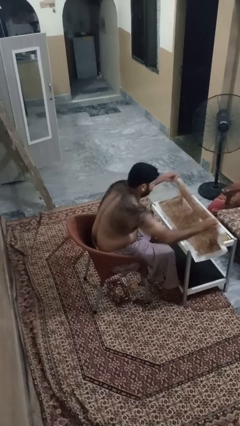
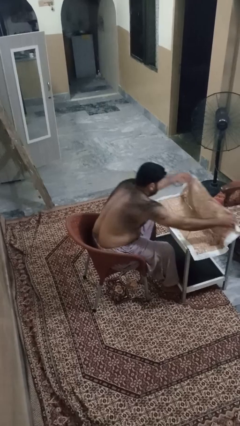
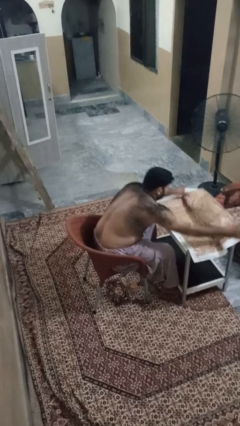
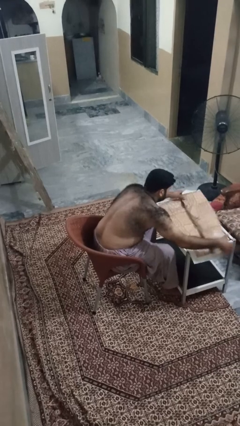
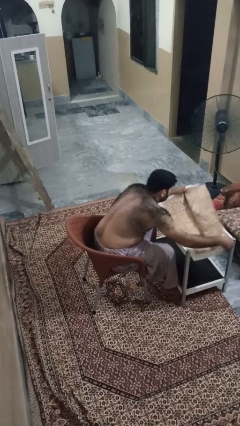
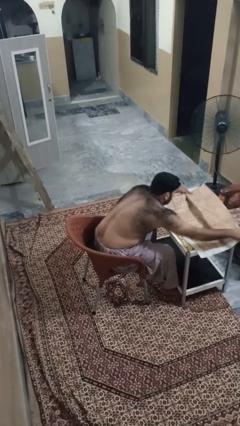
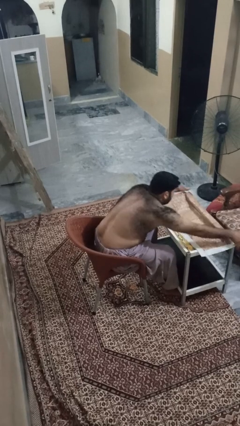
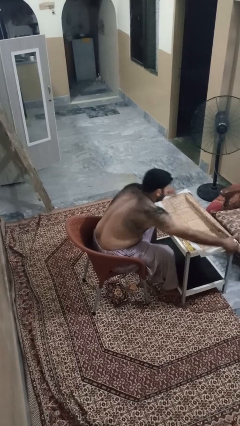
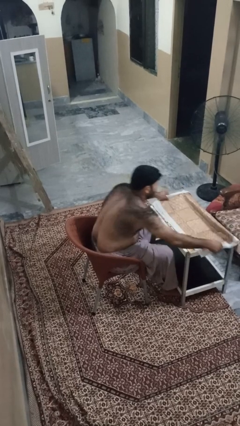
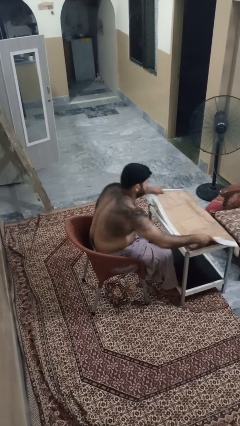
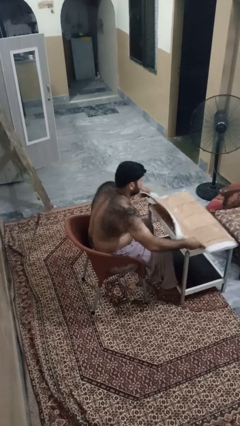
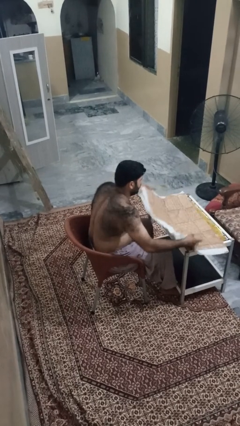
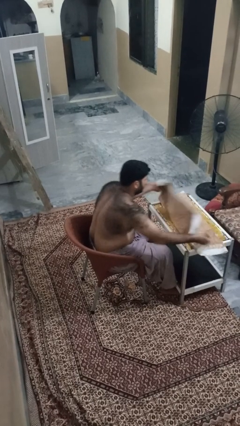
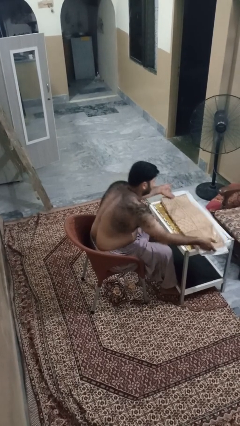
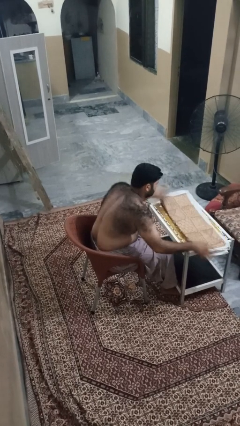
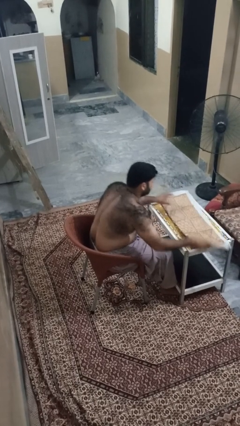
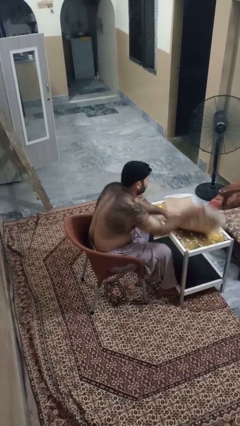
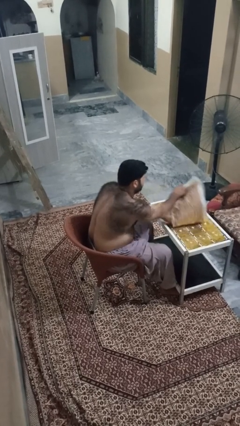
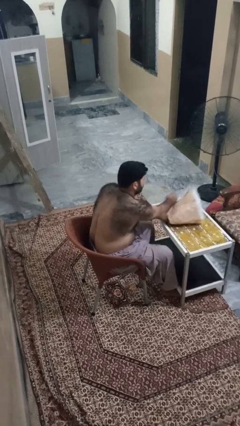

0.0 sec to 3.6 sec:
person folds tablecloth

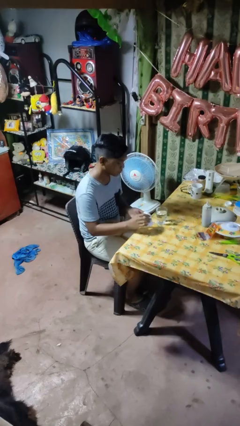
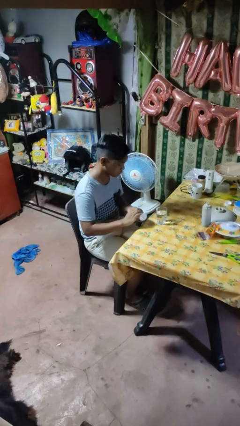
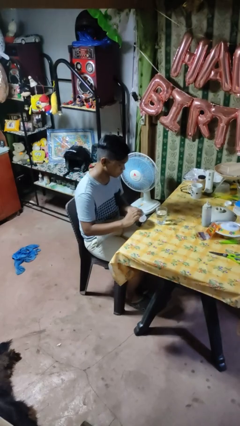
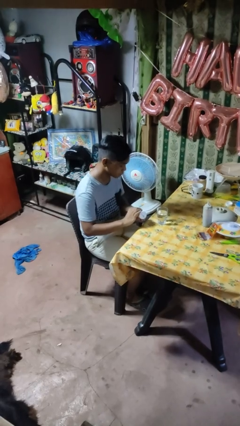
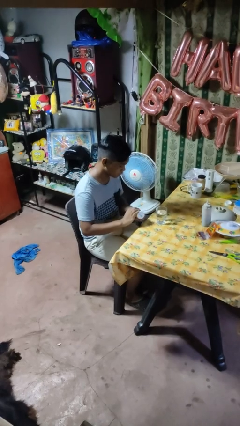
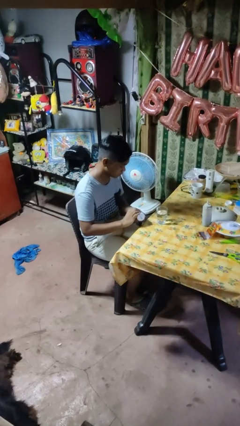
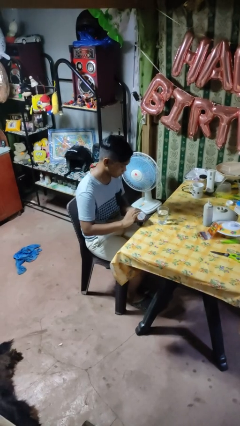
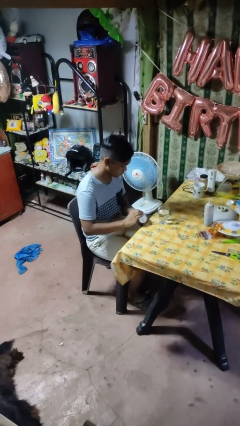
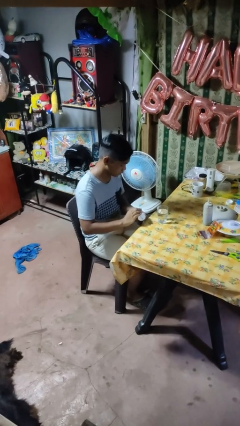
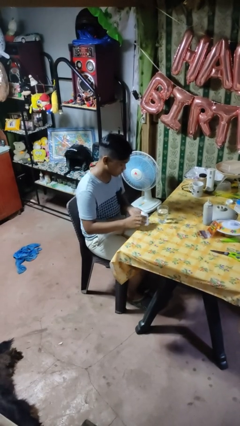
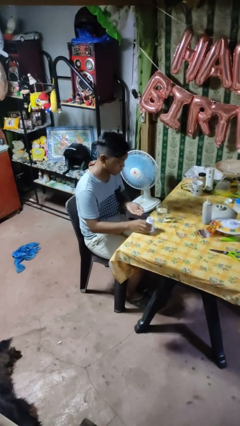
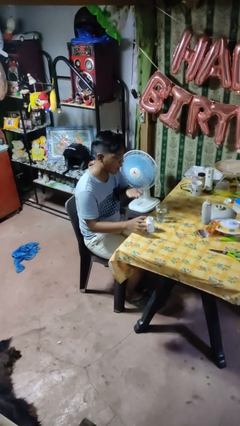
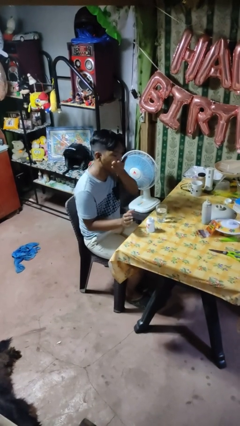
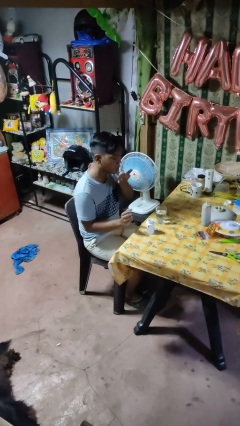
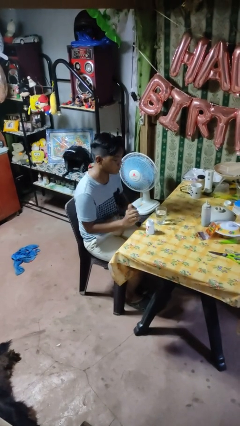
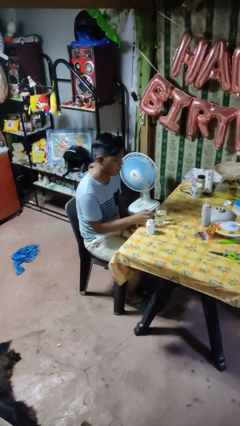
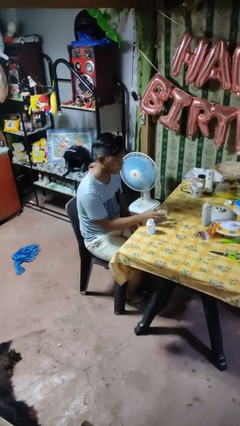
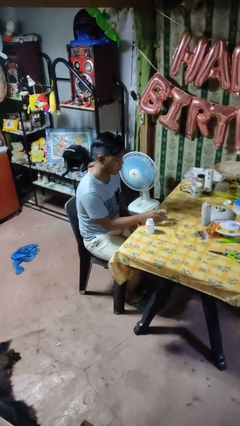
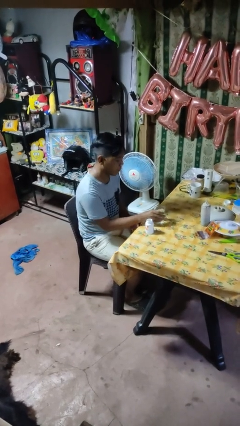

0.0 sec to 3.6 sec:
person takes medicine pills

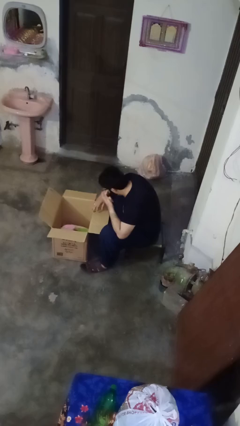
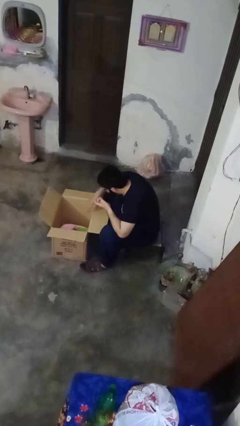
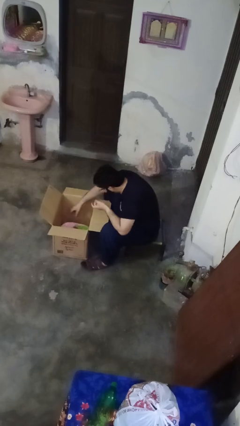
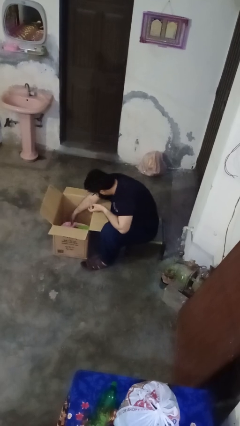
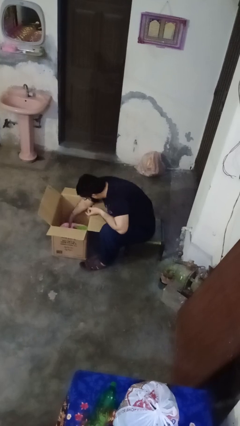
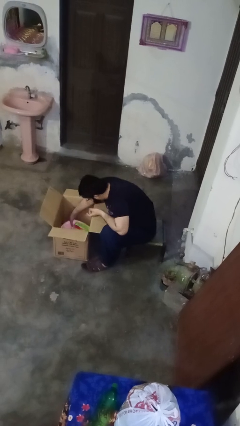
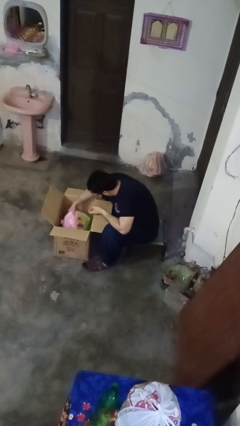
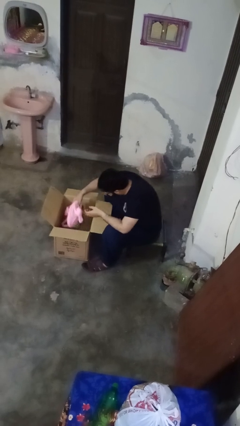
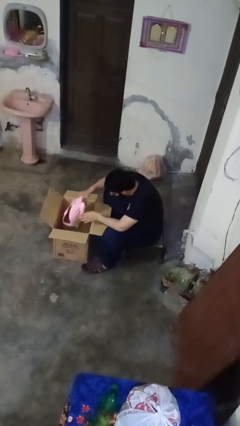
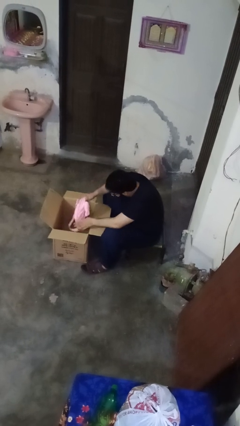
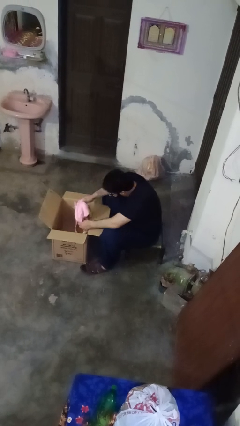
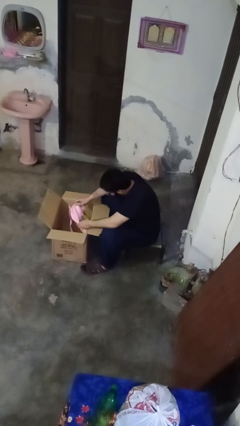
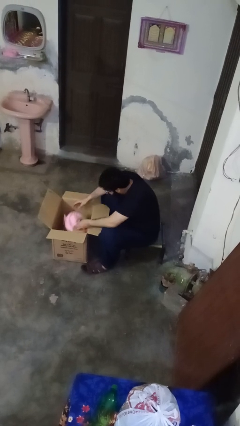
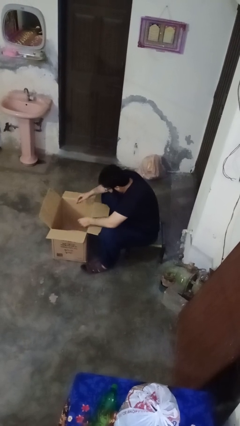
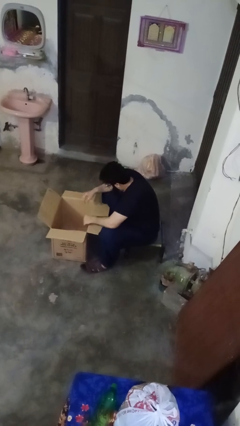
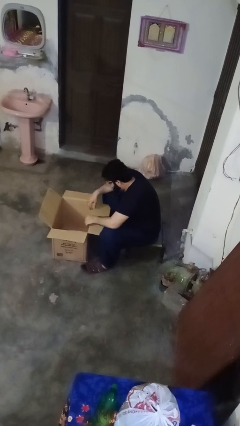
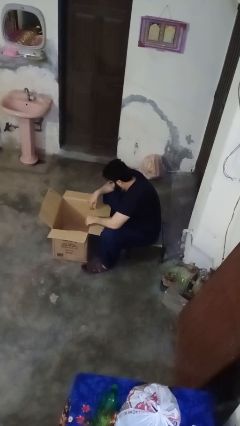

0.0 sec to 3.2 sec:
person searches in box

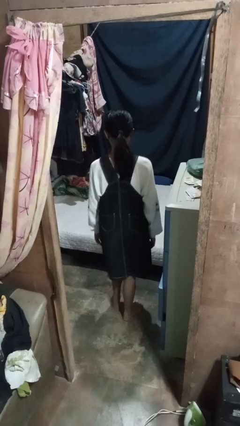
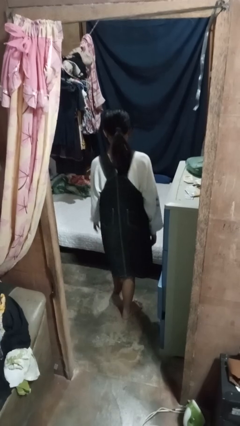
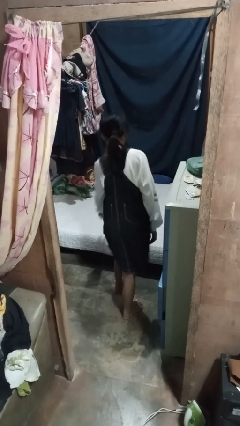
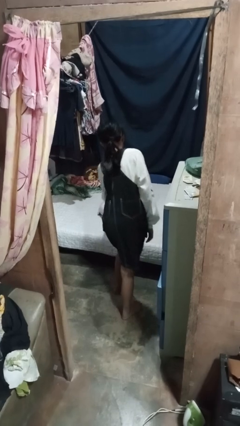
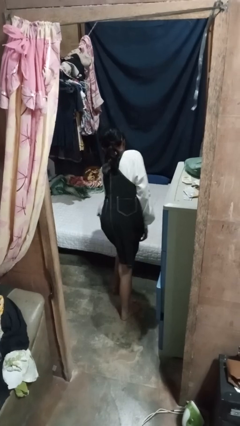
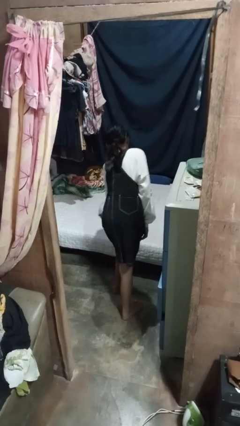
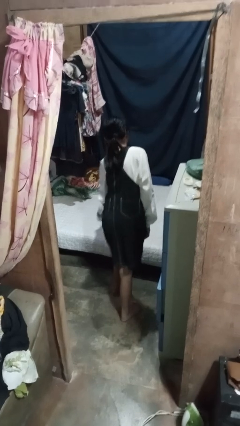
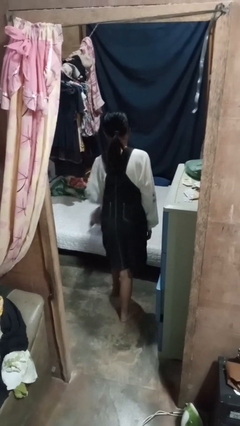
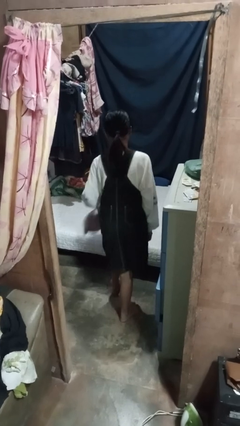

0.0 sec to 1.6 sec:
person picks up object from bed

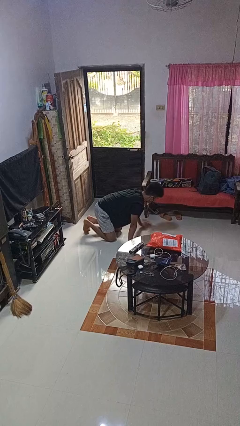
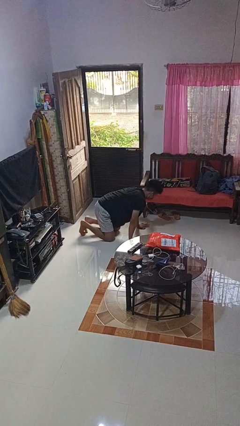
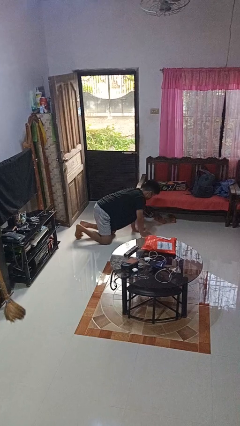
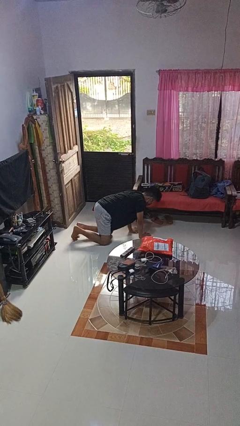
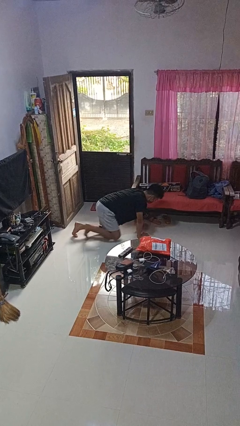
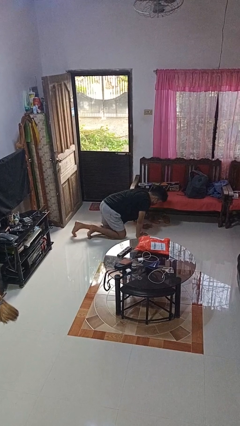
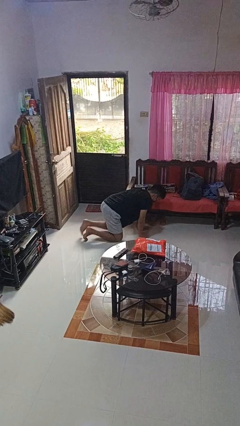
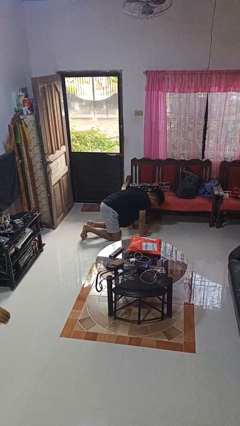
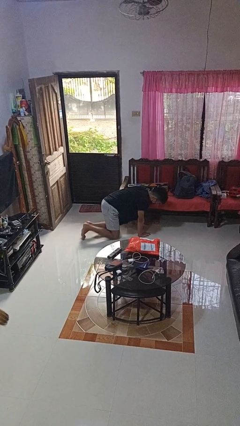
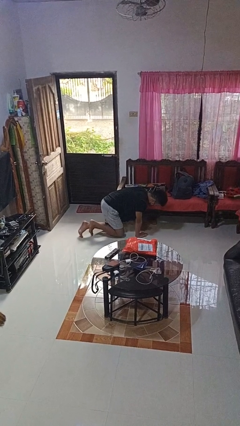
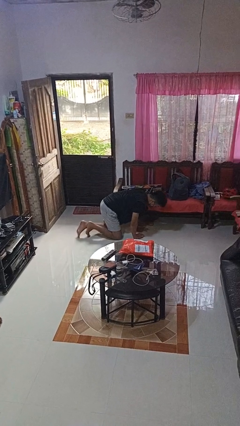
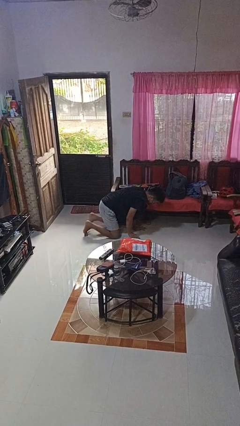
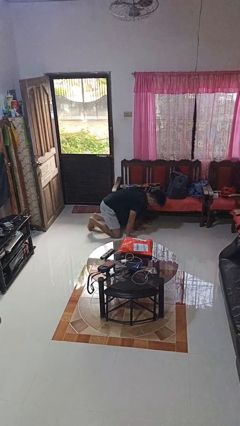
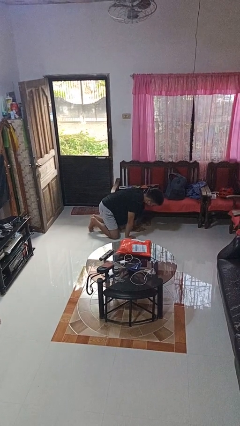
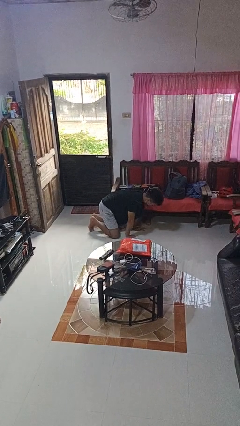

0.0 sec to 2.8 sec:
person crawls

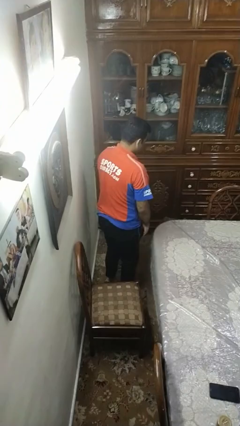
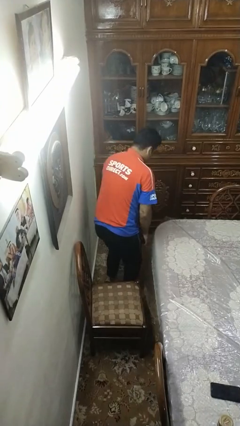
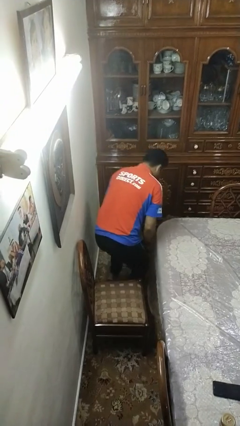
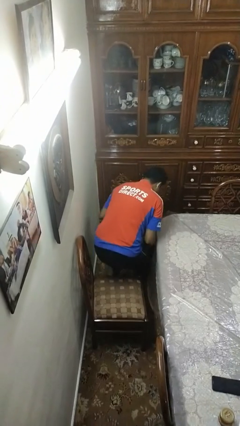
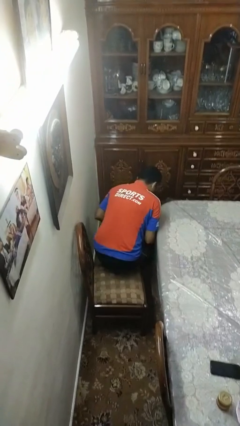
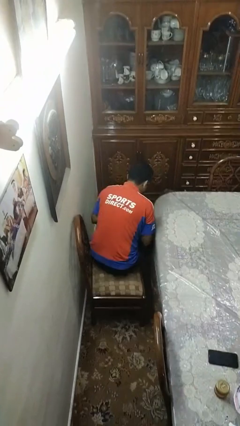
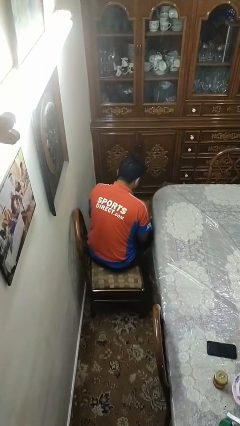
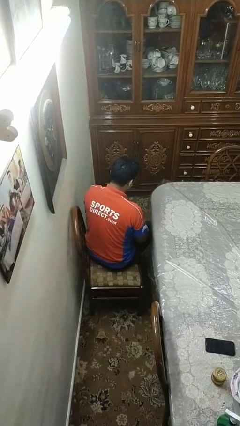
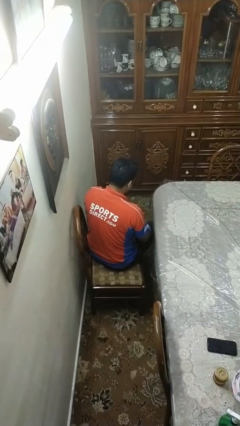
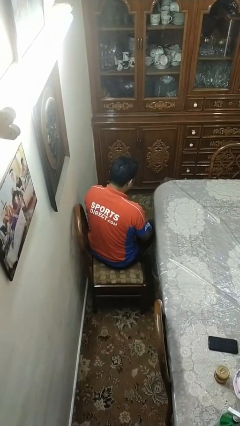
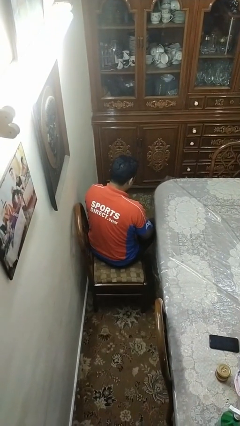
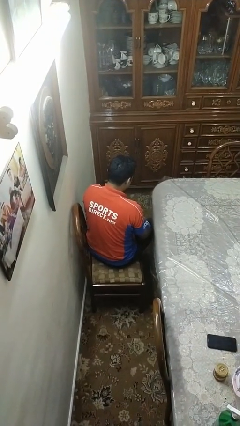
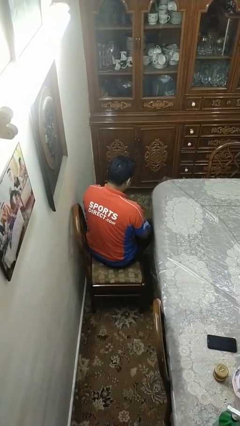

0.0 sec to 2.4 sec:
person sits down
